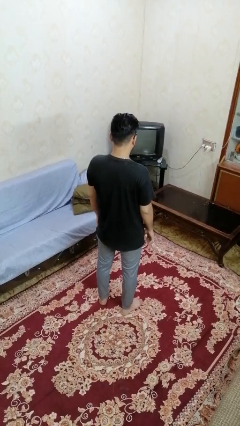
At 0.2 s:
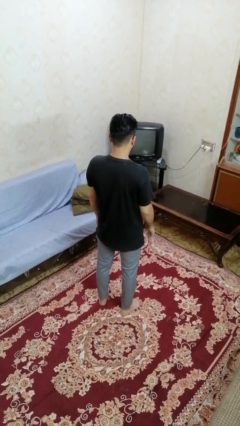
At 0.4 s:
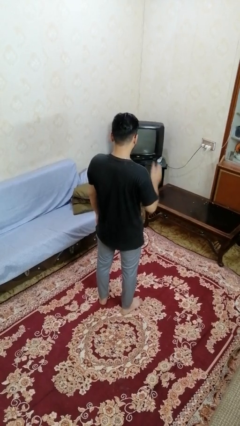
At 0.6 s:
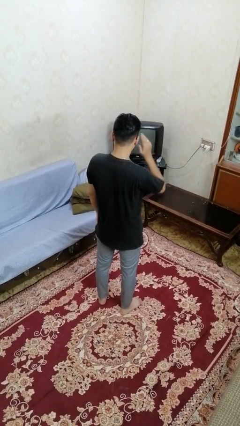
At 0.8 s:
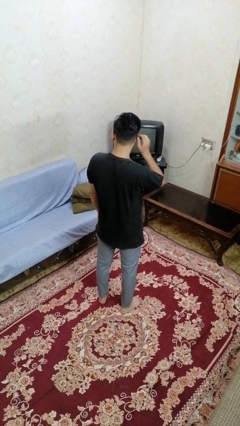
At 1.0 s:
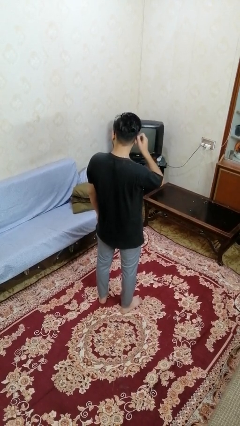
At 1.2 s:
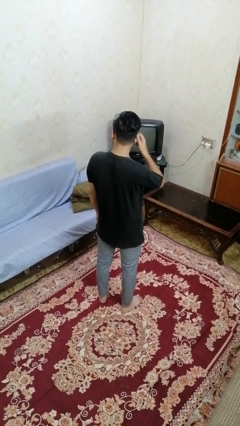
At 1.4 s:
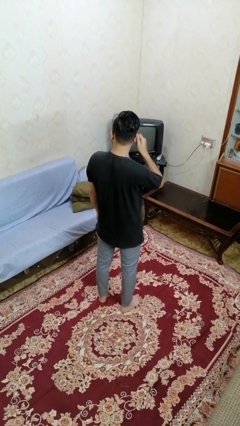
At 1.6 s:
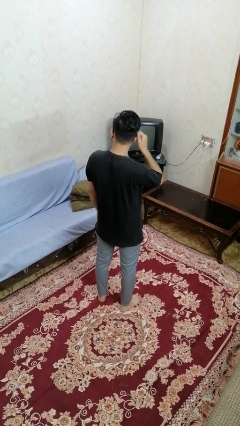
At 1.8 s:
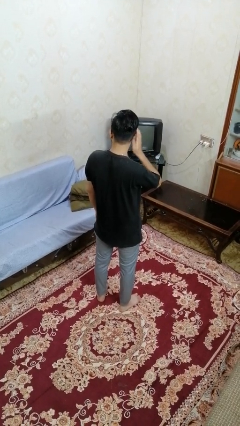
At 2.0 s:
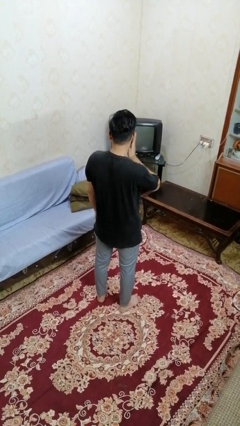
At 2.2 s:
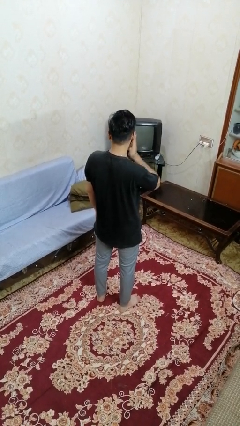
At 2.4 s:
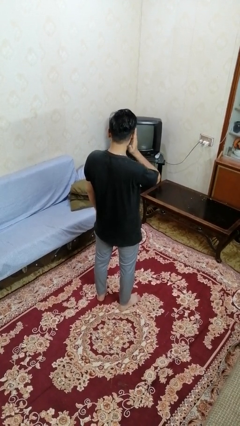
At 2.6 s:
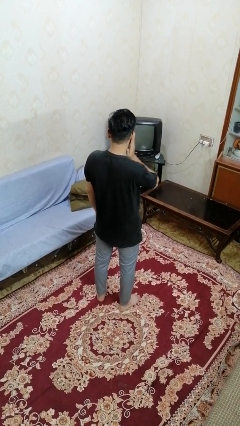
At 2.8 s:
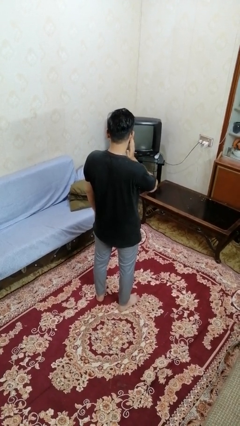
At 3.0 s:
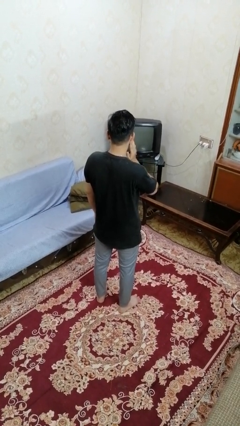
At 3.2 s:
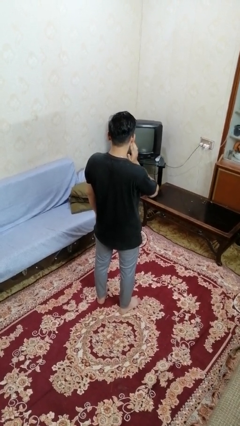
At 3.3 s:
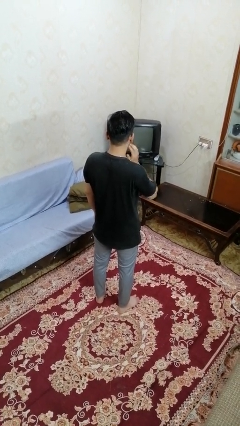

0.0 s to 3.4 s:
person touches earlobe

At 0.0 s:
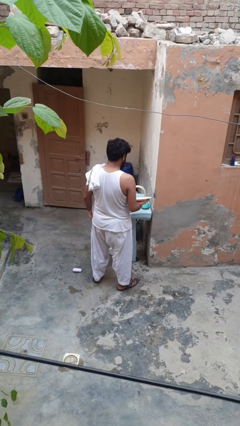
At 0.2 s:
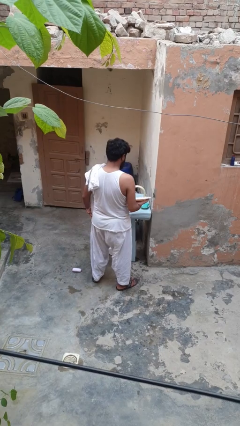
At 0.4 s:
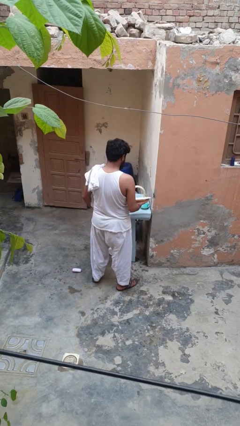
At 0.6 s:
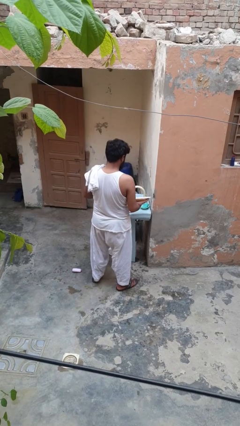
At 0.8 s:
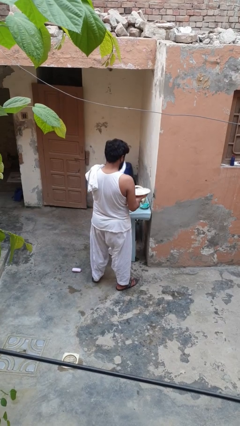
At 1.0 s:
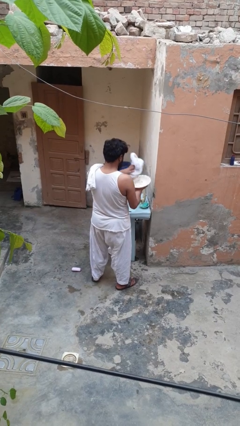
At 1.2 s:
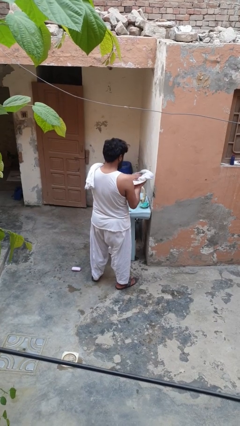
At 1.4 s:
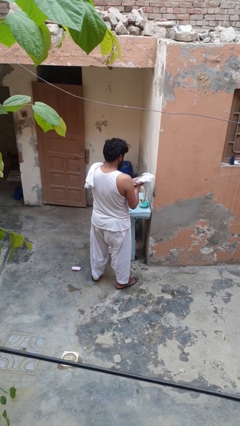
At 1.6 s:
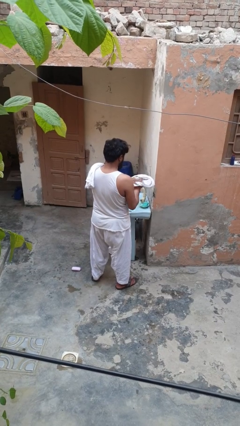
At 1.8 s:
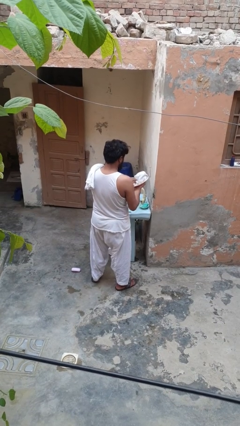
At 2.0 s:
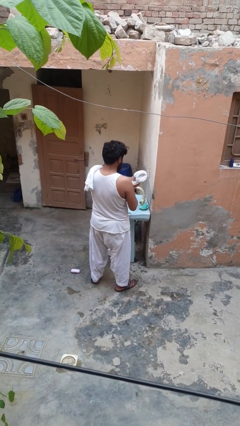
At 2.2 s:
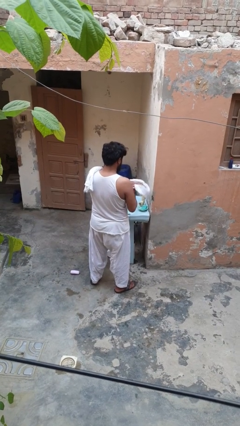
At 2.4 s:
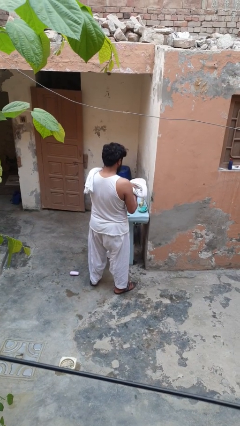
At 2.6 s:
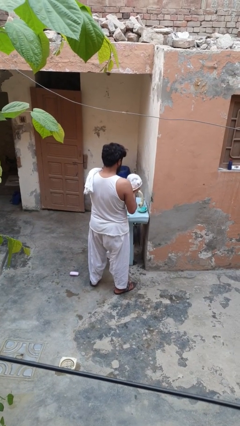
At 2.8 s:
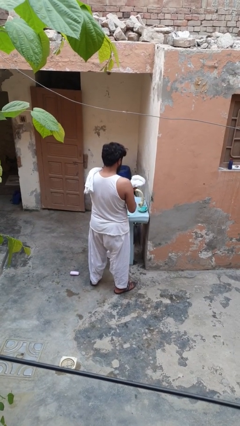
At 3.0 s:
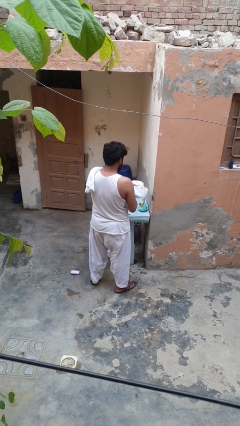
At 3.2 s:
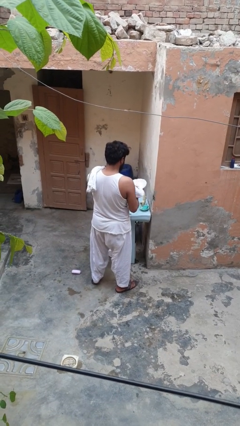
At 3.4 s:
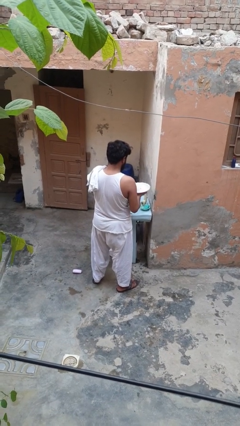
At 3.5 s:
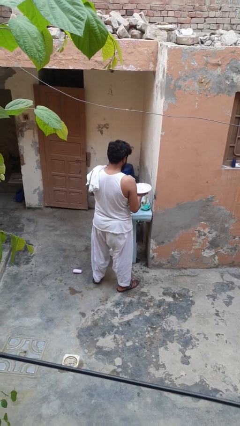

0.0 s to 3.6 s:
person dries dish

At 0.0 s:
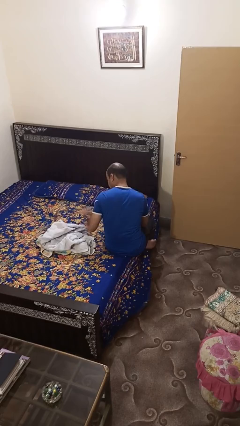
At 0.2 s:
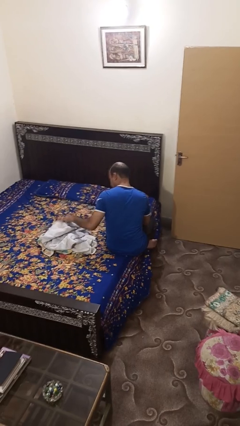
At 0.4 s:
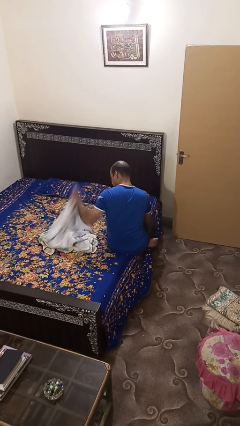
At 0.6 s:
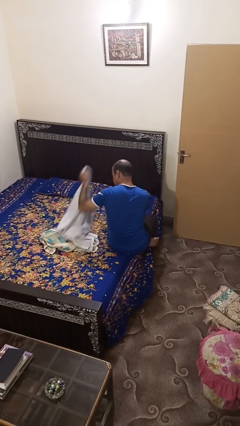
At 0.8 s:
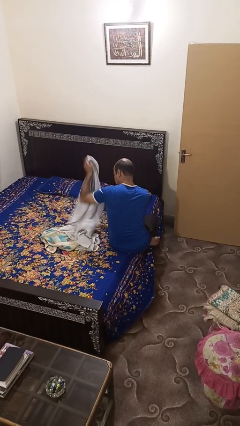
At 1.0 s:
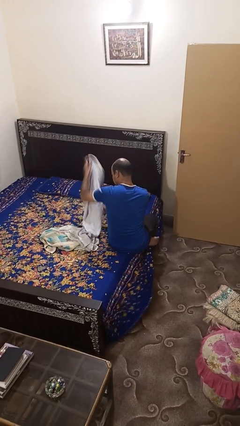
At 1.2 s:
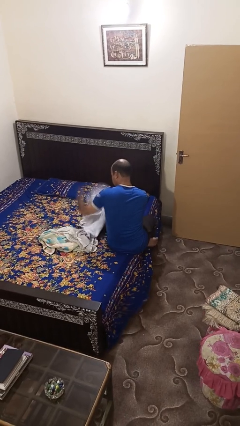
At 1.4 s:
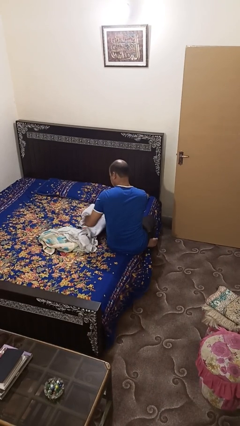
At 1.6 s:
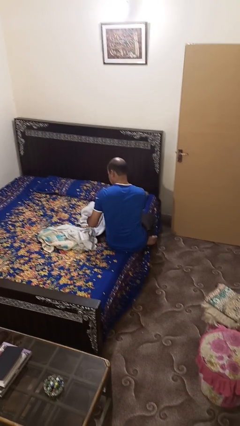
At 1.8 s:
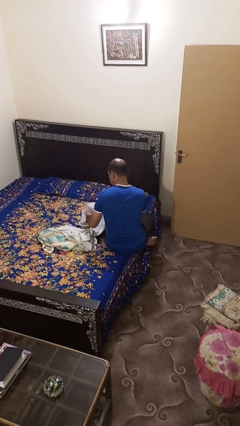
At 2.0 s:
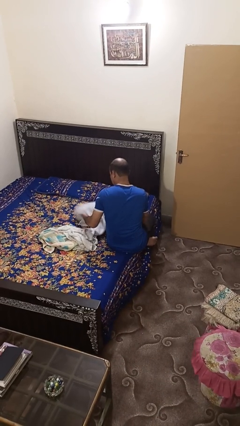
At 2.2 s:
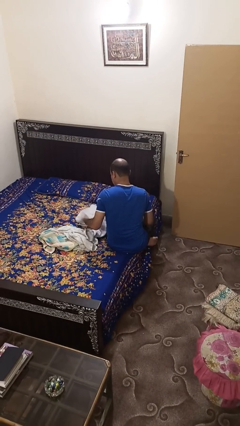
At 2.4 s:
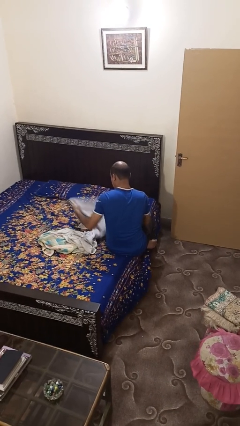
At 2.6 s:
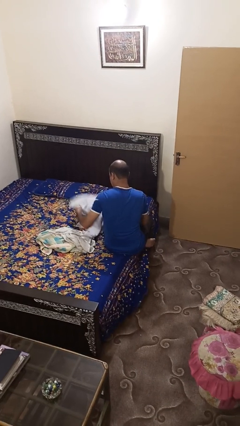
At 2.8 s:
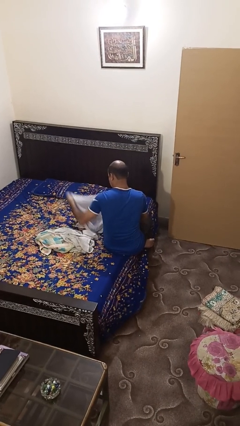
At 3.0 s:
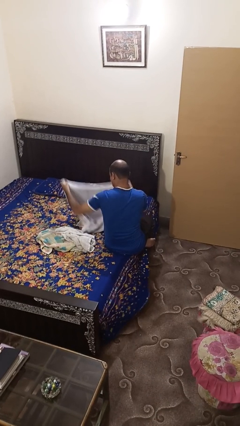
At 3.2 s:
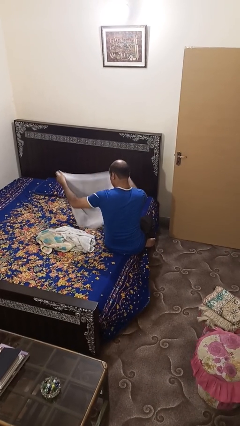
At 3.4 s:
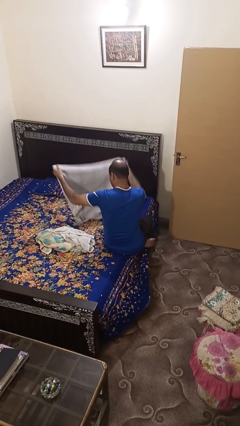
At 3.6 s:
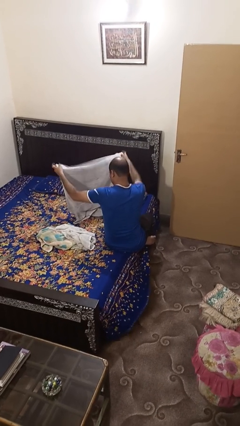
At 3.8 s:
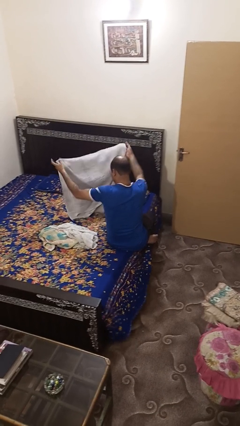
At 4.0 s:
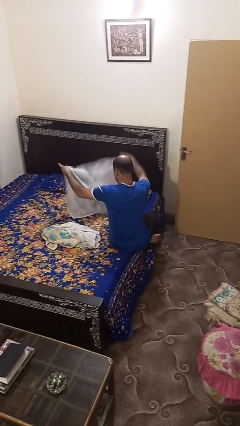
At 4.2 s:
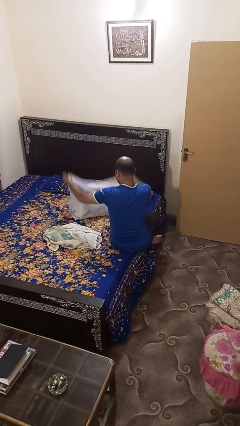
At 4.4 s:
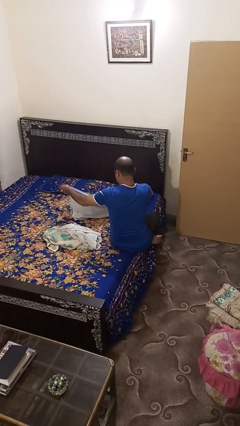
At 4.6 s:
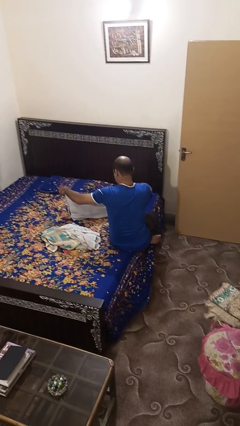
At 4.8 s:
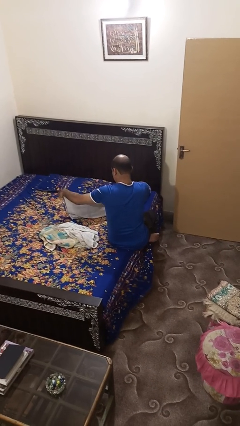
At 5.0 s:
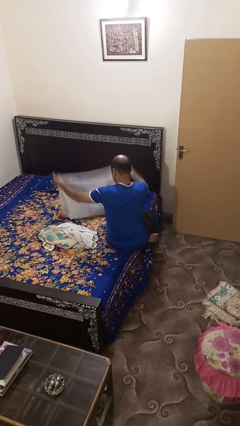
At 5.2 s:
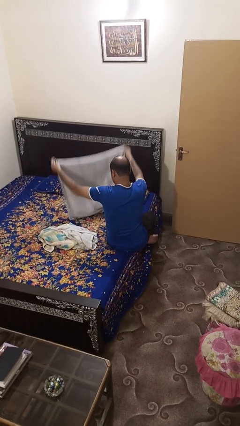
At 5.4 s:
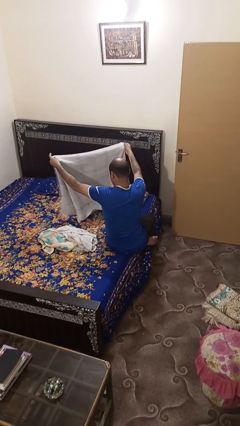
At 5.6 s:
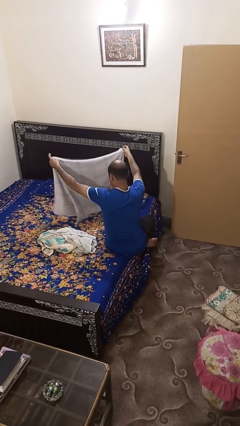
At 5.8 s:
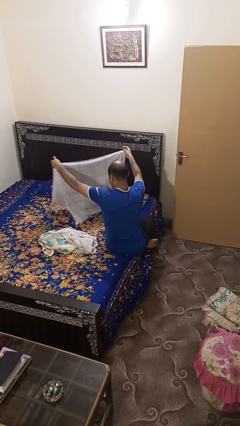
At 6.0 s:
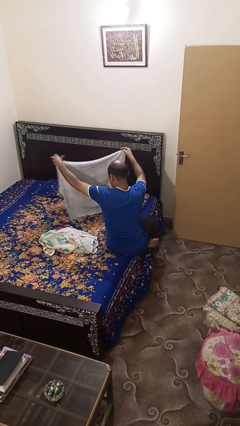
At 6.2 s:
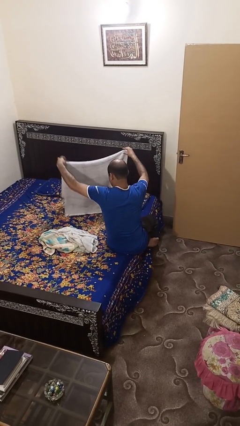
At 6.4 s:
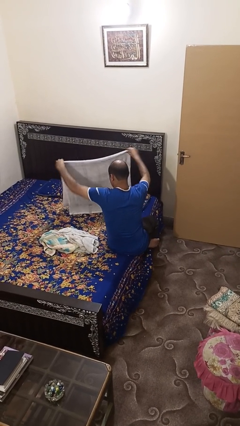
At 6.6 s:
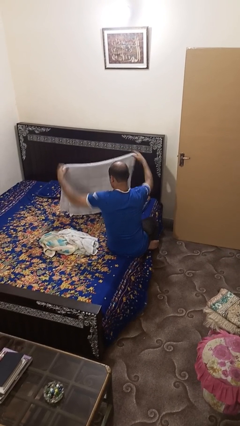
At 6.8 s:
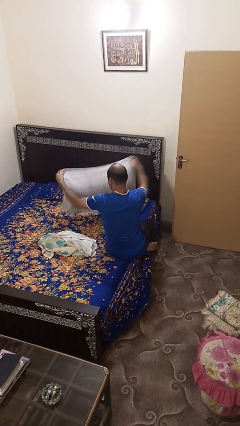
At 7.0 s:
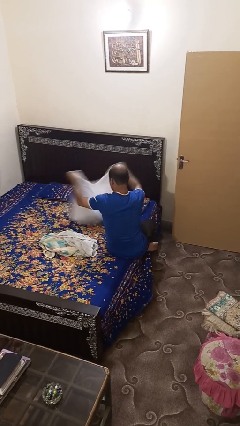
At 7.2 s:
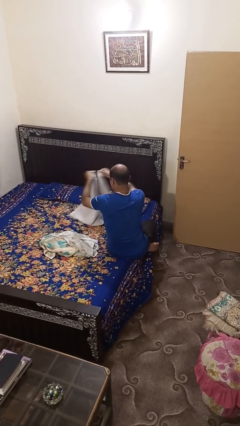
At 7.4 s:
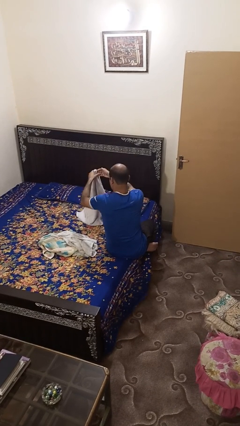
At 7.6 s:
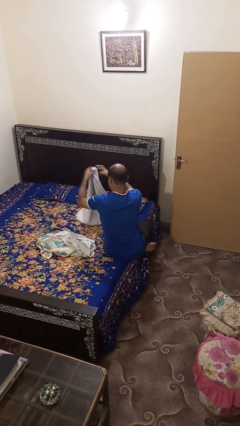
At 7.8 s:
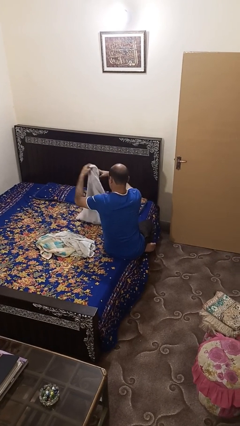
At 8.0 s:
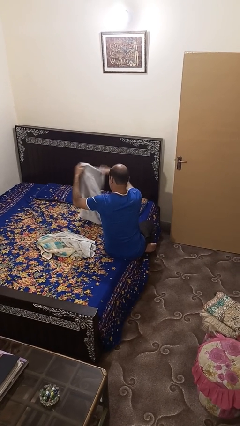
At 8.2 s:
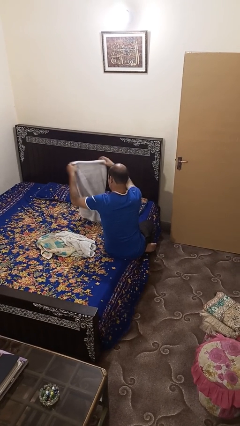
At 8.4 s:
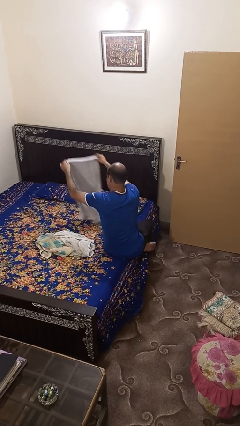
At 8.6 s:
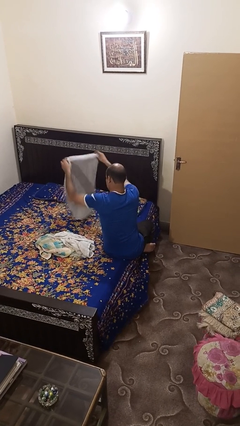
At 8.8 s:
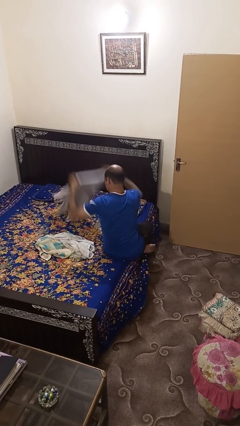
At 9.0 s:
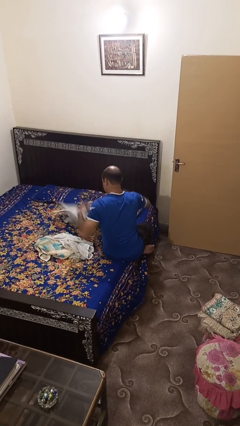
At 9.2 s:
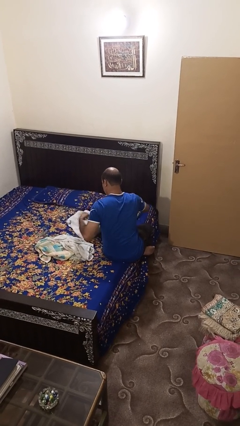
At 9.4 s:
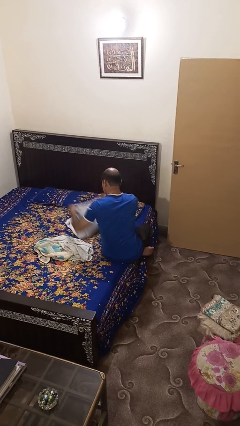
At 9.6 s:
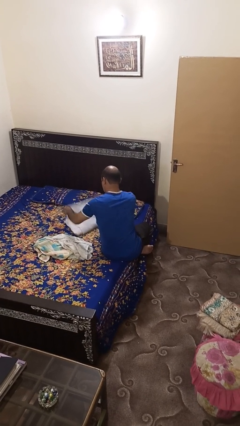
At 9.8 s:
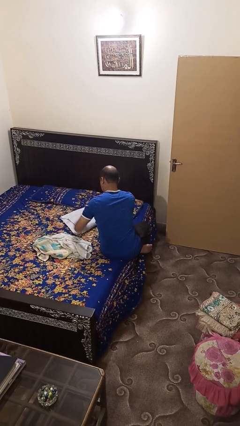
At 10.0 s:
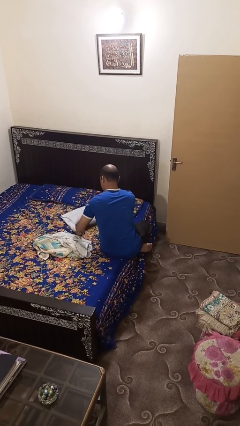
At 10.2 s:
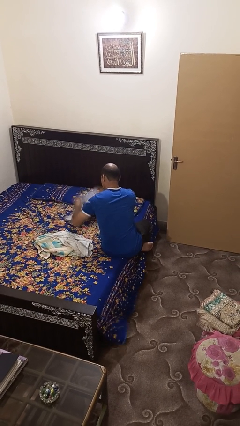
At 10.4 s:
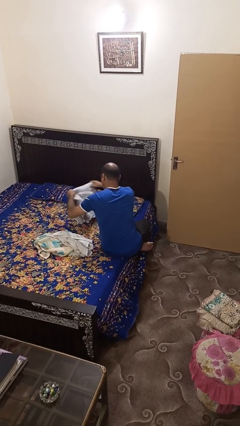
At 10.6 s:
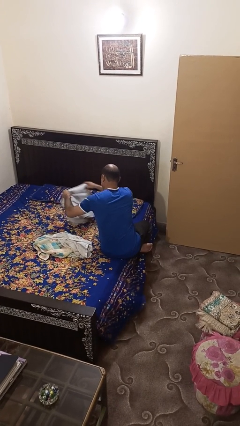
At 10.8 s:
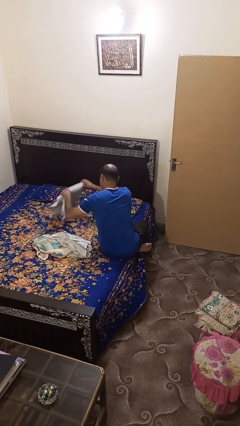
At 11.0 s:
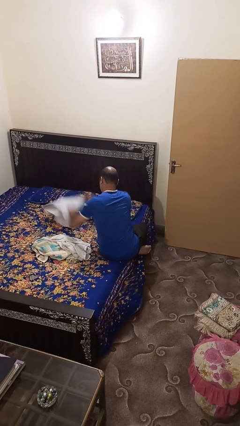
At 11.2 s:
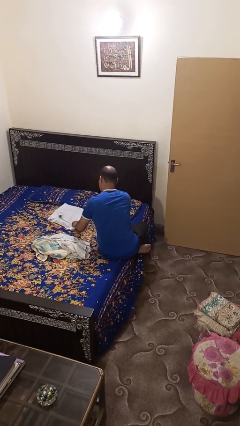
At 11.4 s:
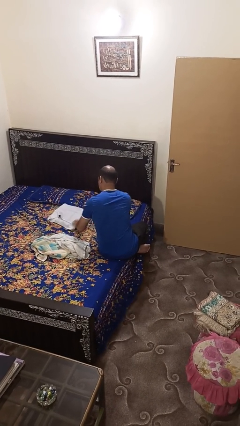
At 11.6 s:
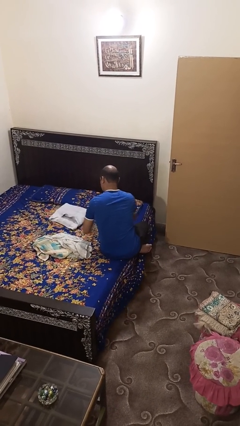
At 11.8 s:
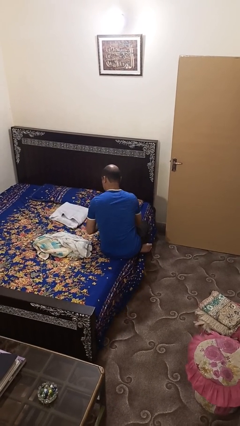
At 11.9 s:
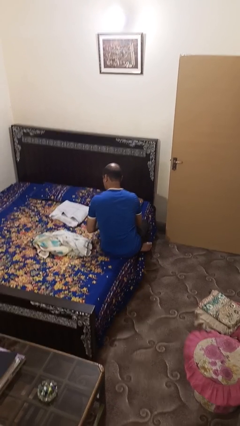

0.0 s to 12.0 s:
person folds towel
